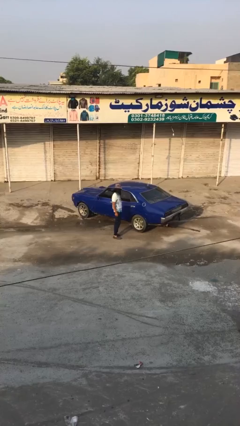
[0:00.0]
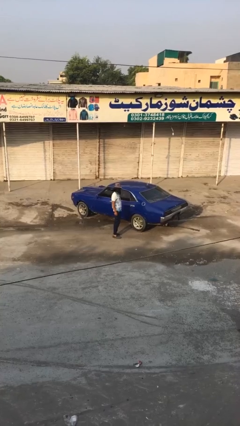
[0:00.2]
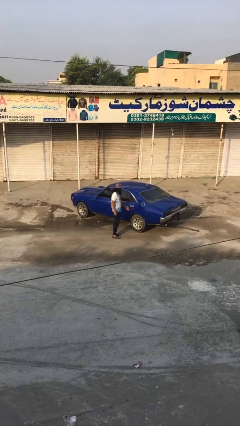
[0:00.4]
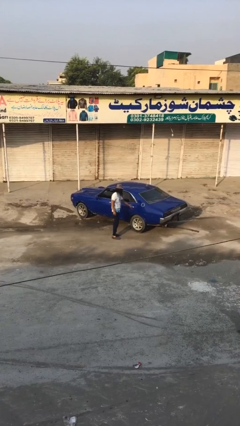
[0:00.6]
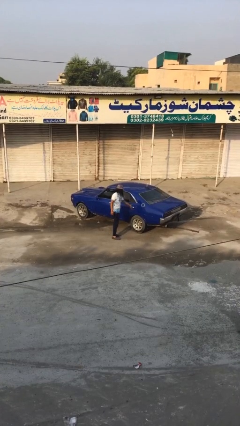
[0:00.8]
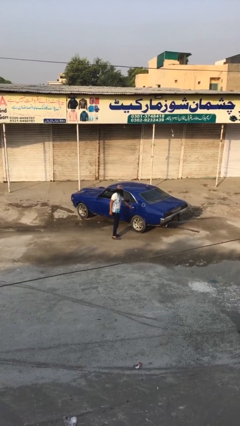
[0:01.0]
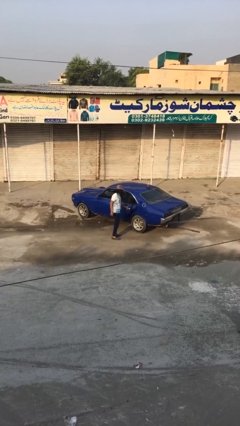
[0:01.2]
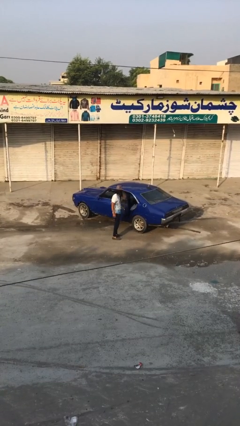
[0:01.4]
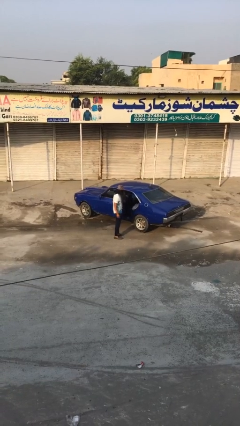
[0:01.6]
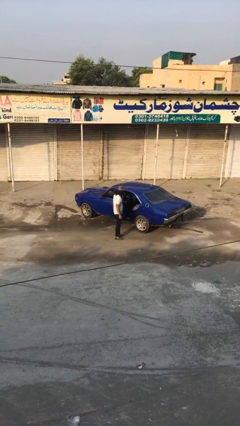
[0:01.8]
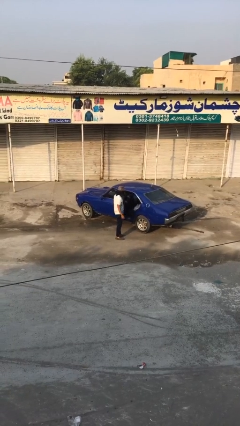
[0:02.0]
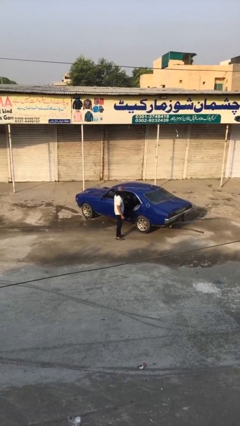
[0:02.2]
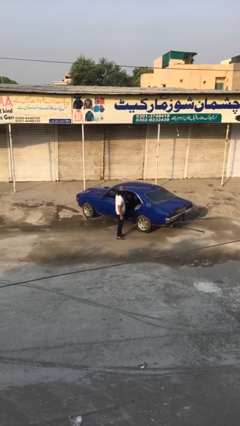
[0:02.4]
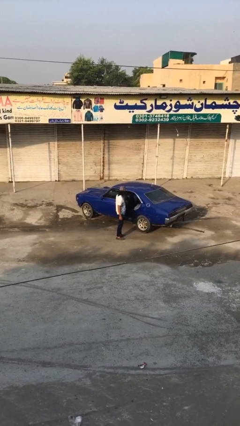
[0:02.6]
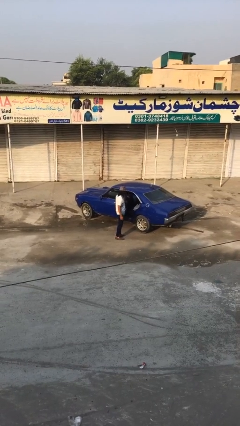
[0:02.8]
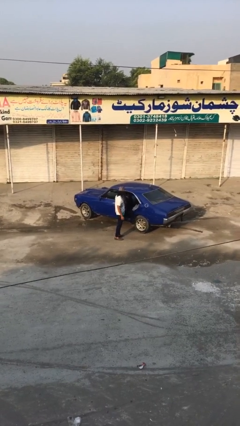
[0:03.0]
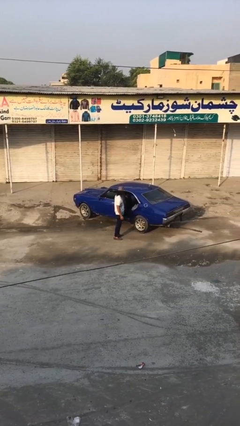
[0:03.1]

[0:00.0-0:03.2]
person opens car door

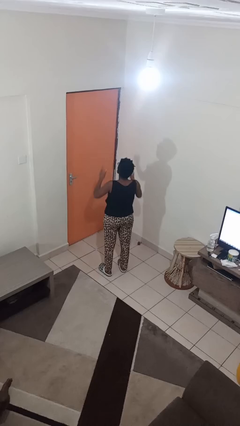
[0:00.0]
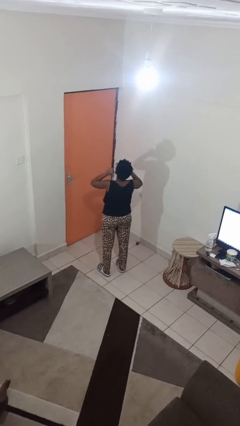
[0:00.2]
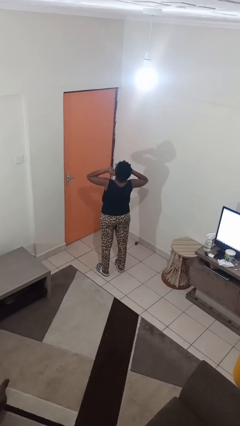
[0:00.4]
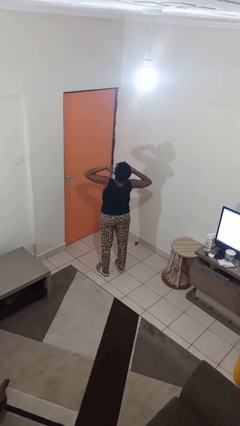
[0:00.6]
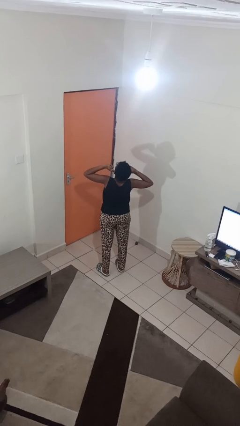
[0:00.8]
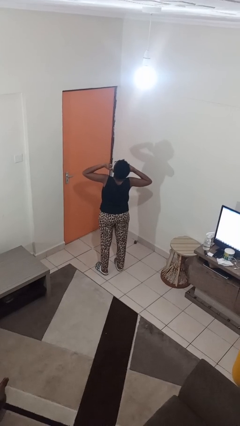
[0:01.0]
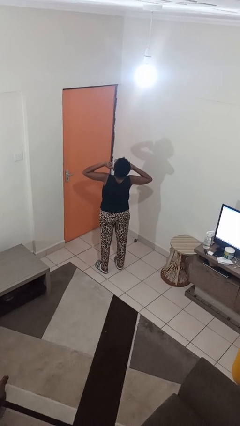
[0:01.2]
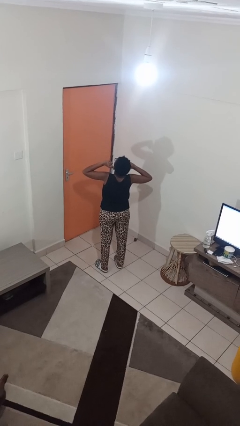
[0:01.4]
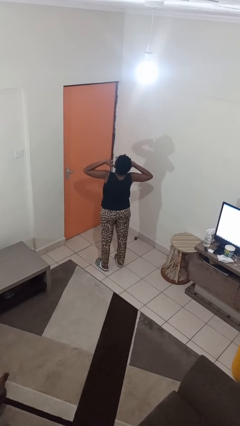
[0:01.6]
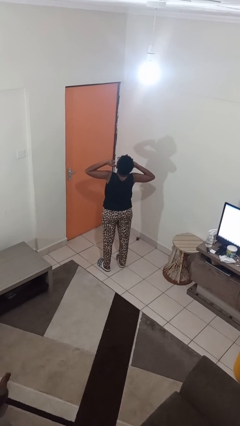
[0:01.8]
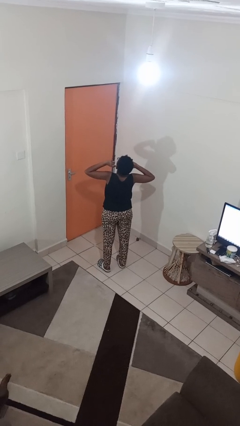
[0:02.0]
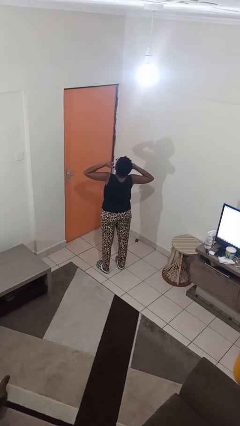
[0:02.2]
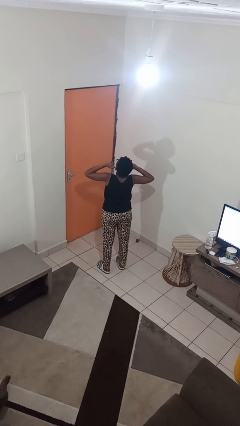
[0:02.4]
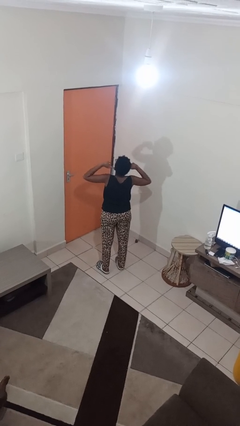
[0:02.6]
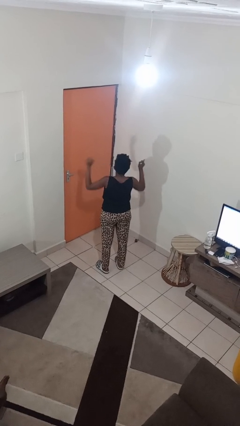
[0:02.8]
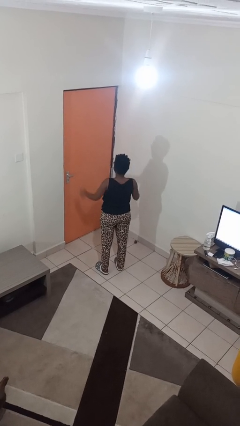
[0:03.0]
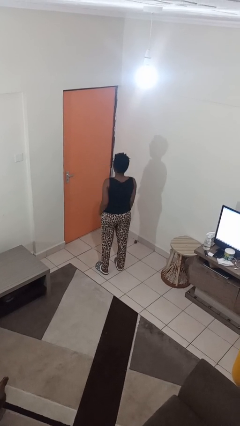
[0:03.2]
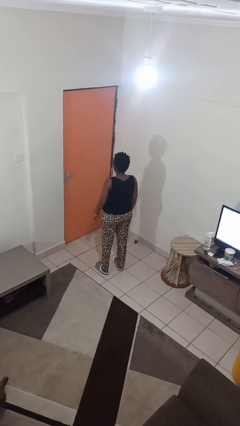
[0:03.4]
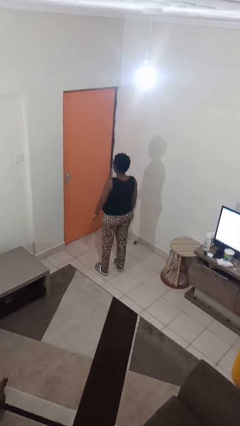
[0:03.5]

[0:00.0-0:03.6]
person puts fingers in ear

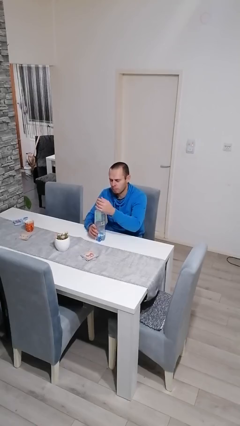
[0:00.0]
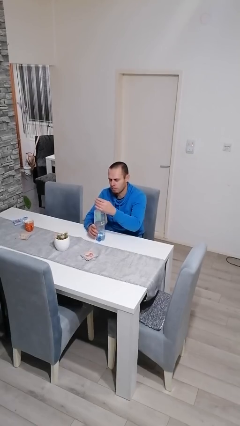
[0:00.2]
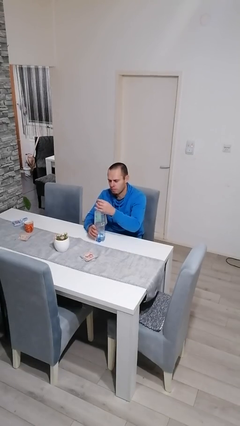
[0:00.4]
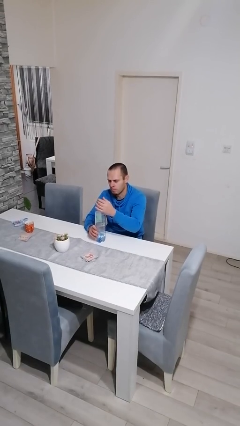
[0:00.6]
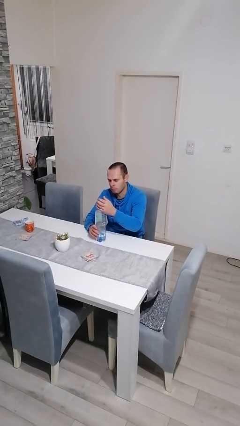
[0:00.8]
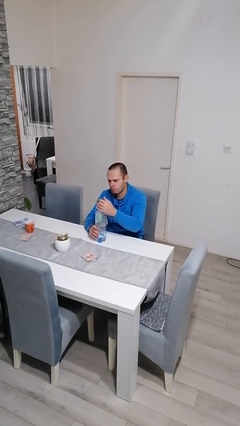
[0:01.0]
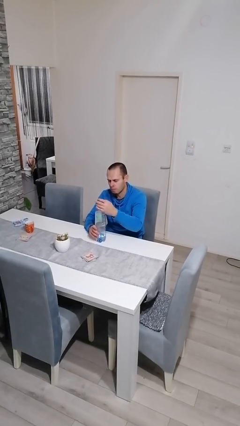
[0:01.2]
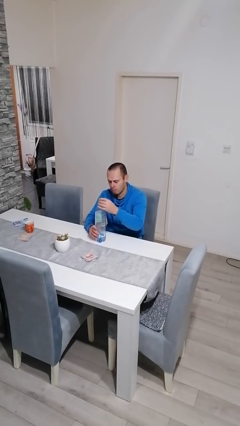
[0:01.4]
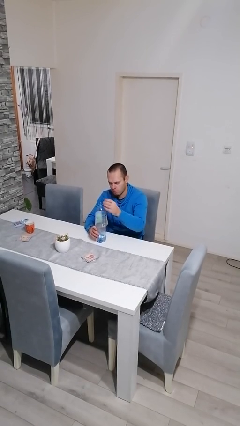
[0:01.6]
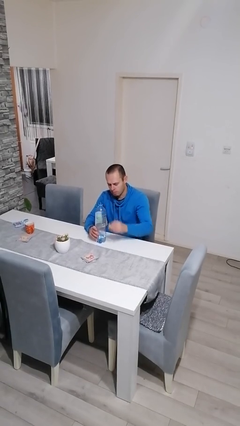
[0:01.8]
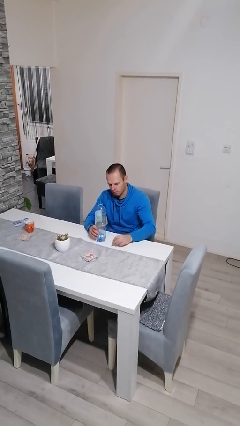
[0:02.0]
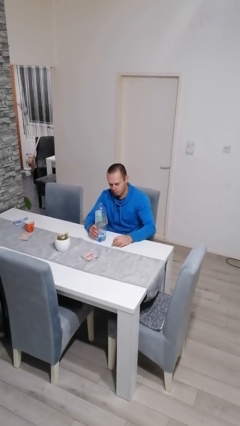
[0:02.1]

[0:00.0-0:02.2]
person unscrews lid from bottle

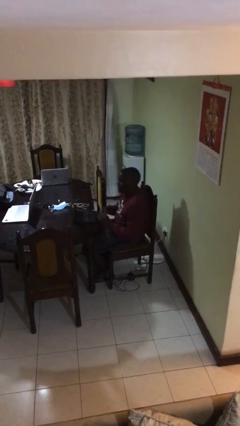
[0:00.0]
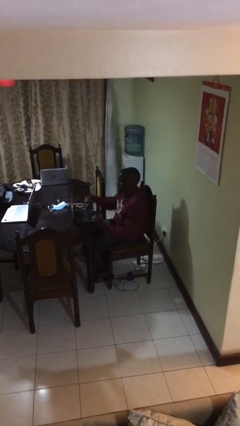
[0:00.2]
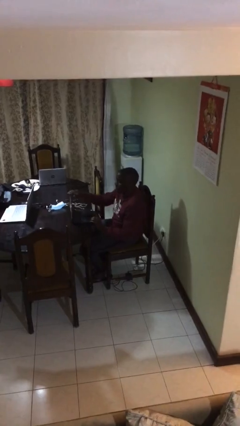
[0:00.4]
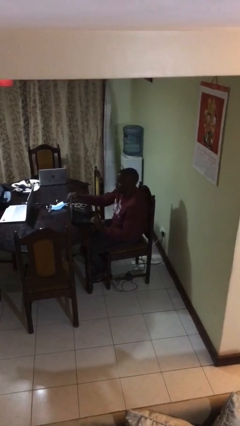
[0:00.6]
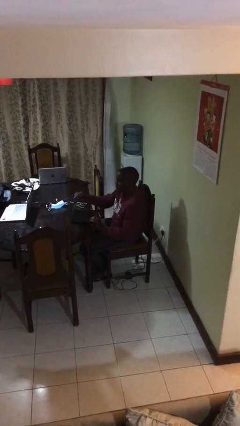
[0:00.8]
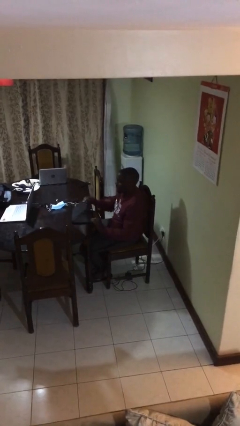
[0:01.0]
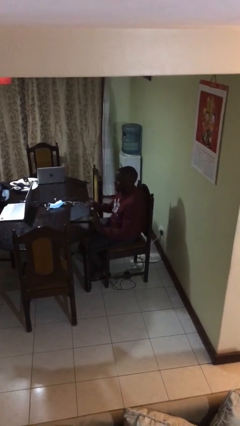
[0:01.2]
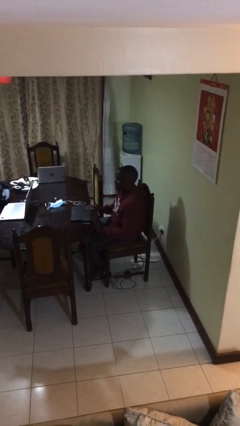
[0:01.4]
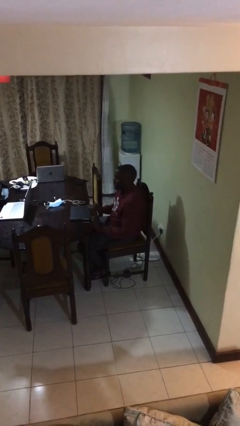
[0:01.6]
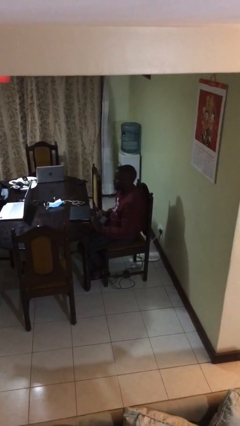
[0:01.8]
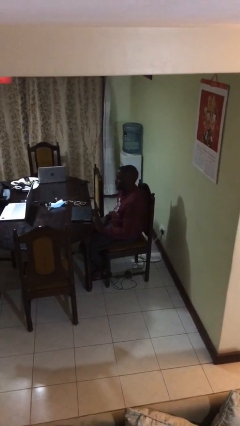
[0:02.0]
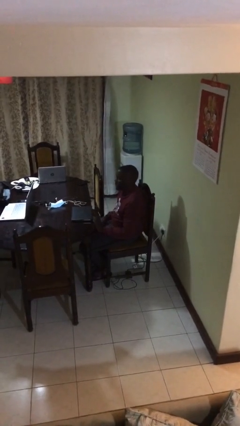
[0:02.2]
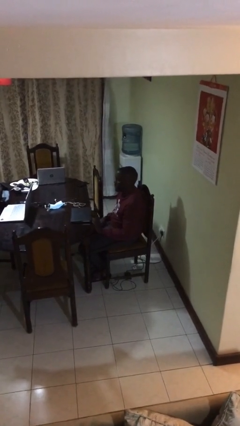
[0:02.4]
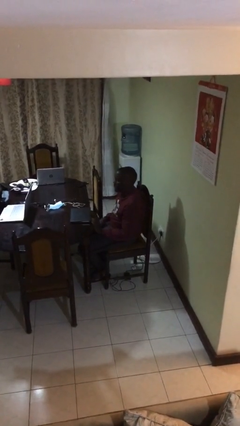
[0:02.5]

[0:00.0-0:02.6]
person closes laptop

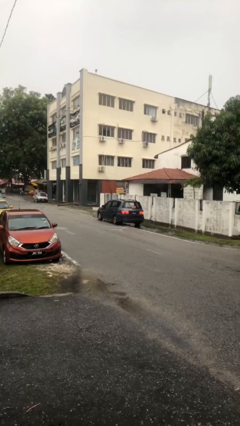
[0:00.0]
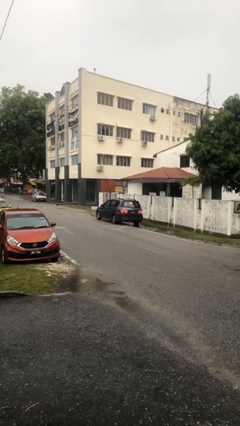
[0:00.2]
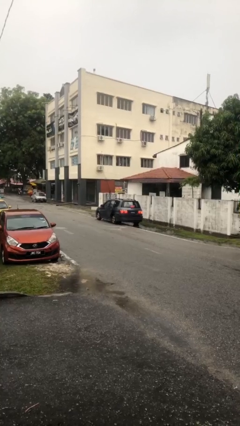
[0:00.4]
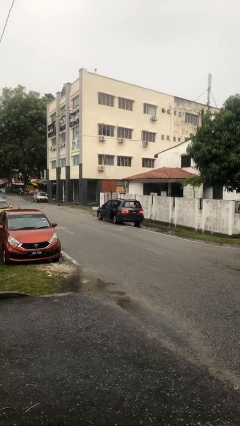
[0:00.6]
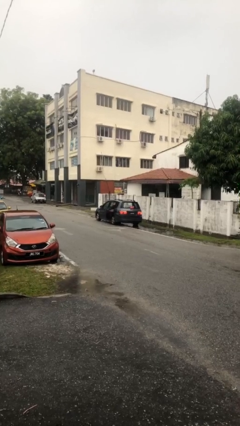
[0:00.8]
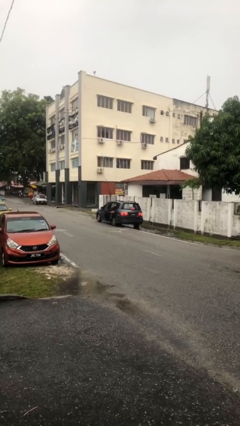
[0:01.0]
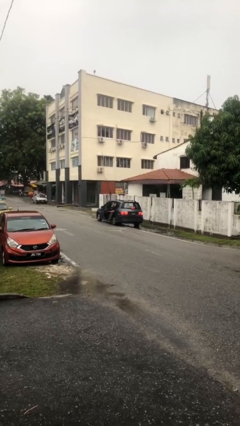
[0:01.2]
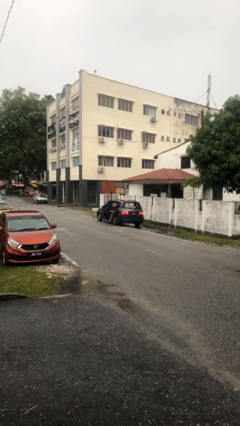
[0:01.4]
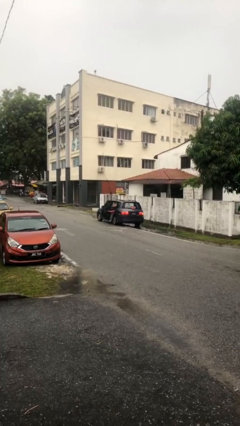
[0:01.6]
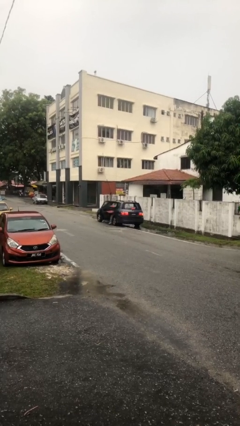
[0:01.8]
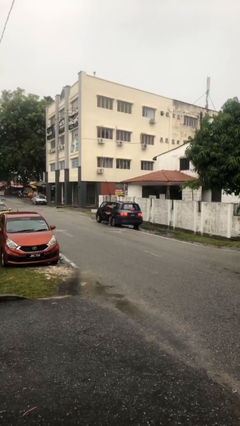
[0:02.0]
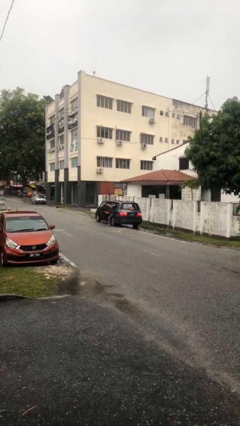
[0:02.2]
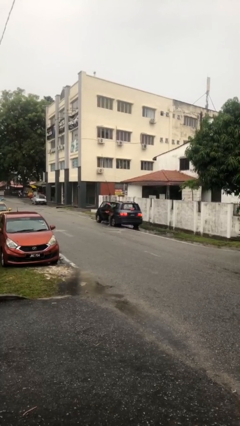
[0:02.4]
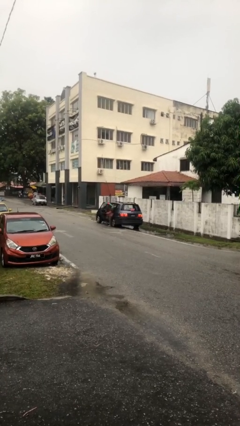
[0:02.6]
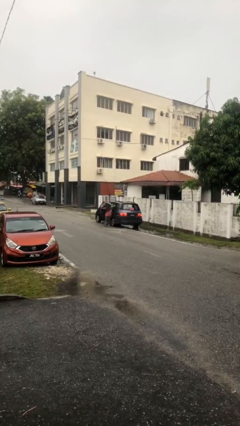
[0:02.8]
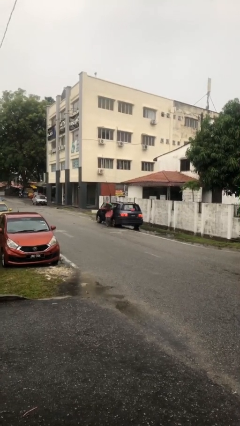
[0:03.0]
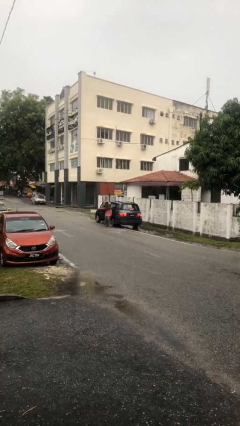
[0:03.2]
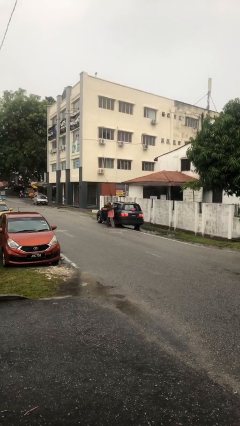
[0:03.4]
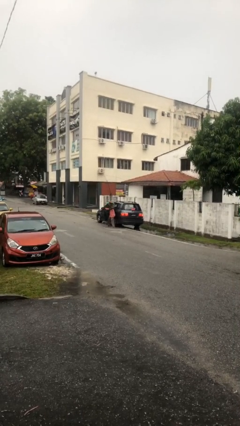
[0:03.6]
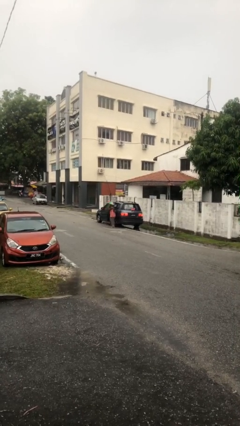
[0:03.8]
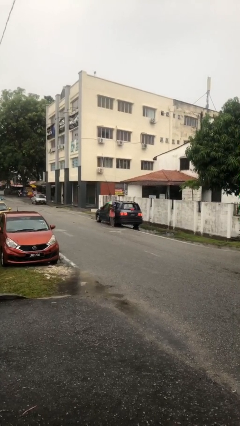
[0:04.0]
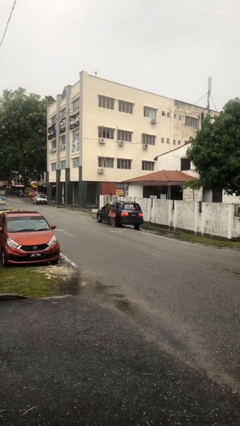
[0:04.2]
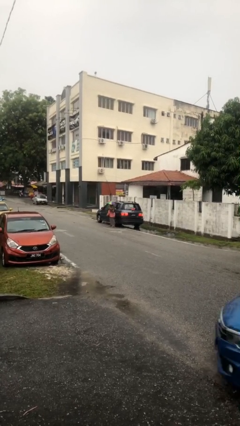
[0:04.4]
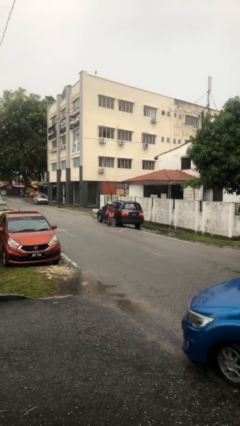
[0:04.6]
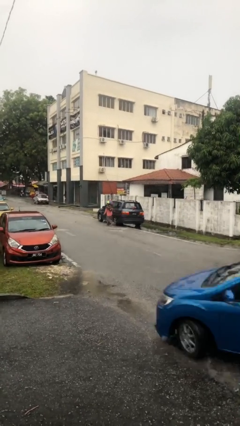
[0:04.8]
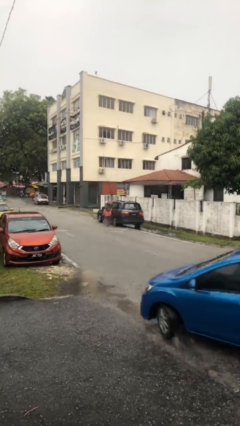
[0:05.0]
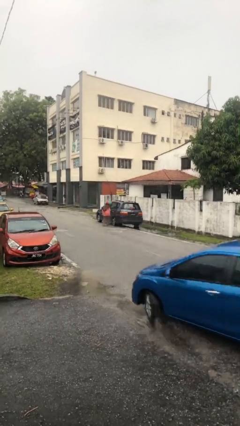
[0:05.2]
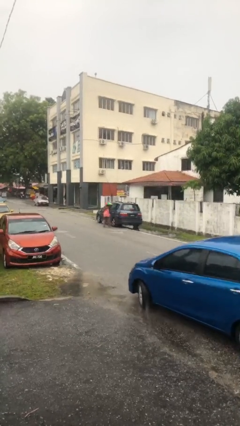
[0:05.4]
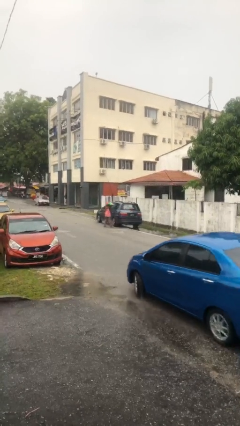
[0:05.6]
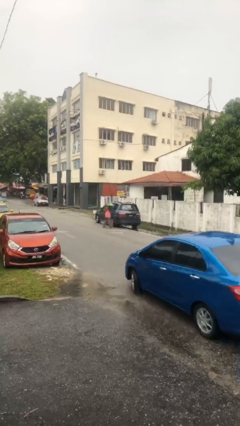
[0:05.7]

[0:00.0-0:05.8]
car drops off person

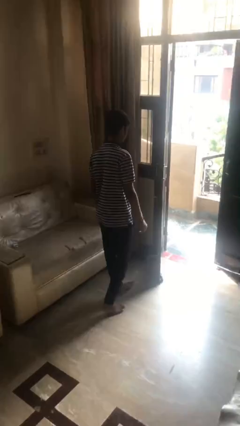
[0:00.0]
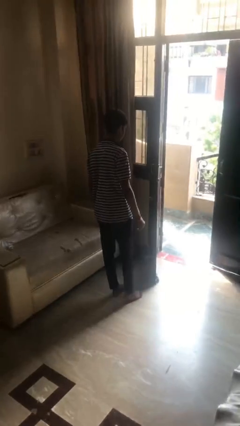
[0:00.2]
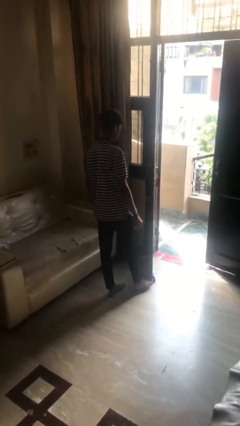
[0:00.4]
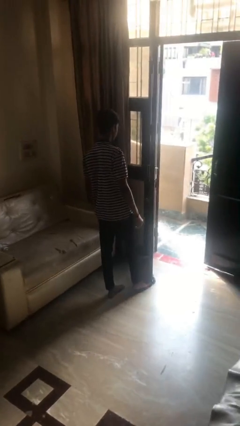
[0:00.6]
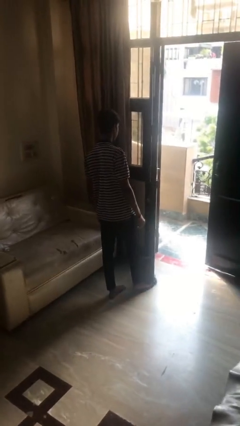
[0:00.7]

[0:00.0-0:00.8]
person stubs toe
